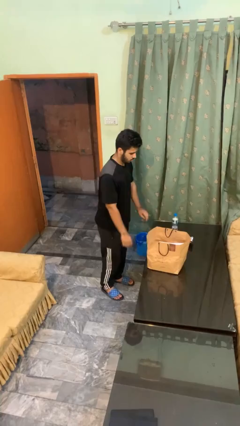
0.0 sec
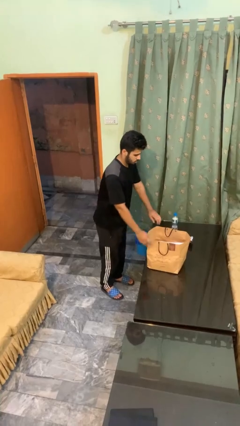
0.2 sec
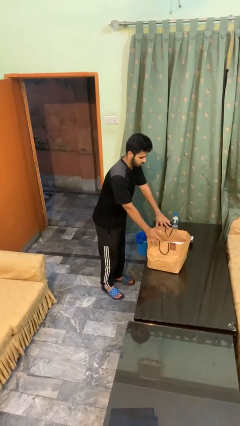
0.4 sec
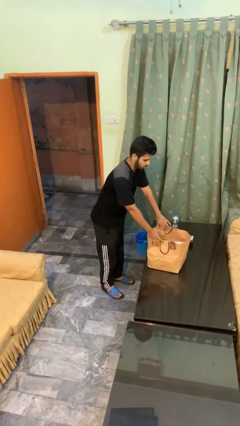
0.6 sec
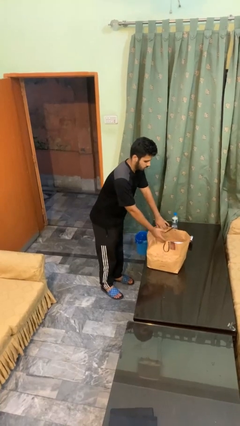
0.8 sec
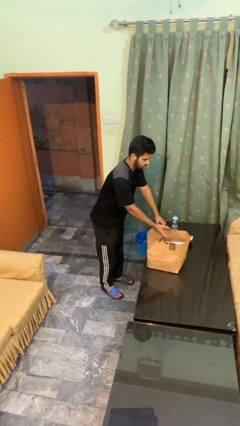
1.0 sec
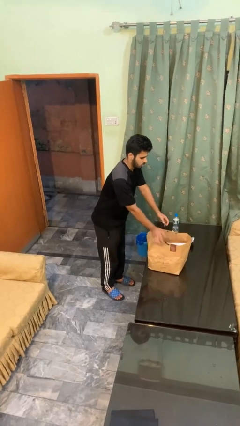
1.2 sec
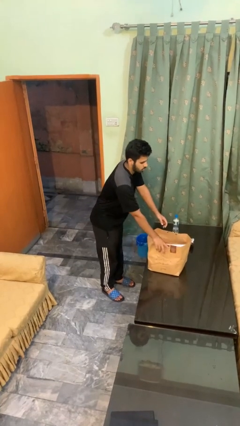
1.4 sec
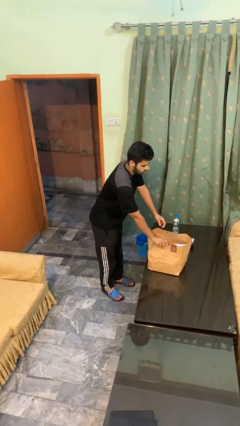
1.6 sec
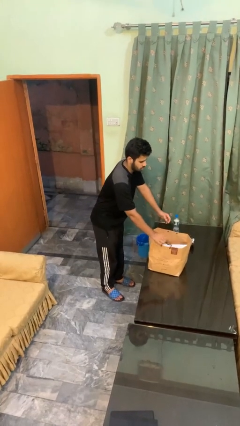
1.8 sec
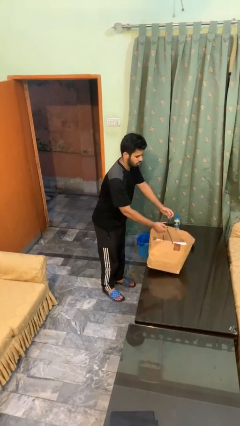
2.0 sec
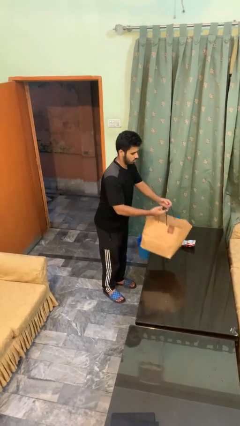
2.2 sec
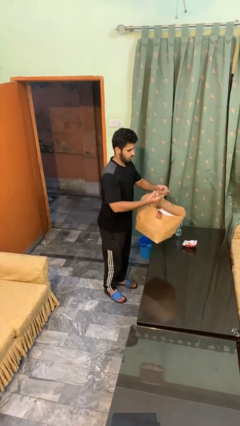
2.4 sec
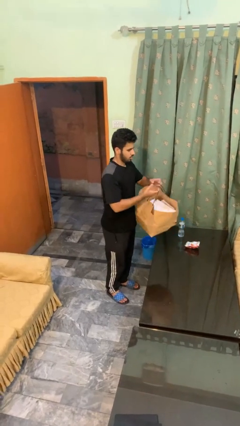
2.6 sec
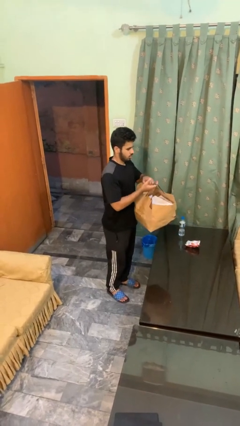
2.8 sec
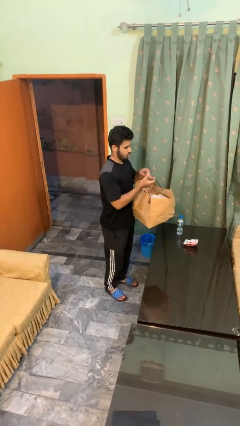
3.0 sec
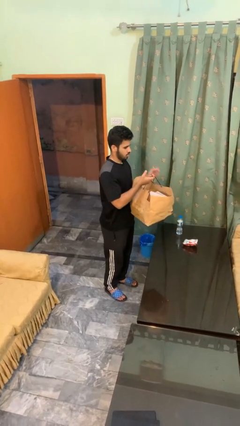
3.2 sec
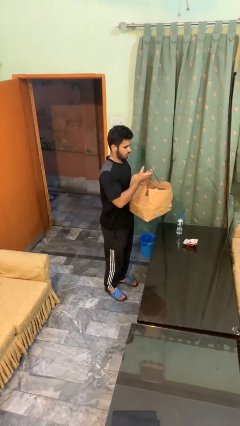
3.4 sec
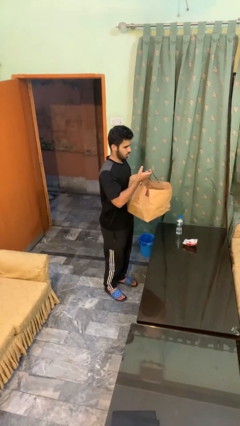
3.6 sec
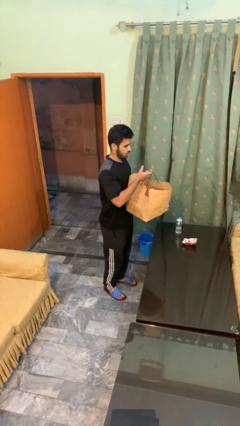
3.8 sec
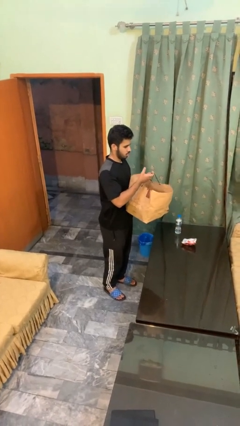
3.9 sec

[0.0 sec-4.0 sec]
person picks up object from countertop

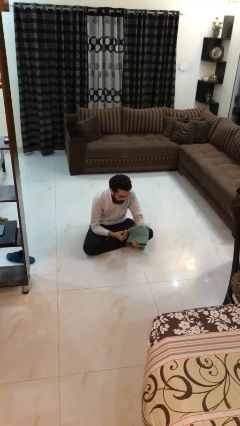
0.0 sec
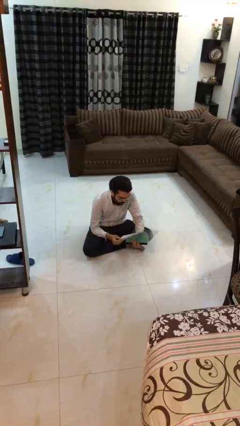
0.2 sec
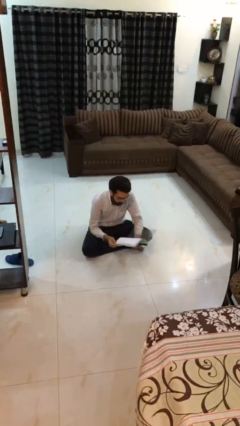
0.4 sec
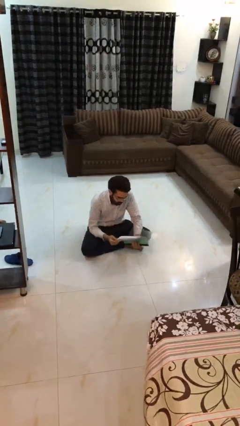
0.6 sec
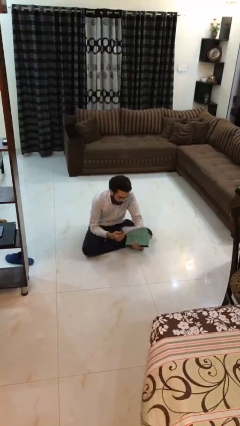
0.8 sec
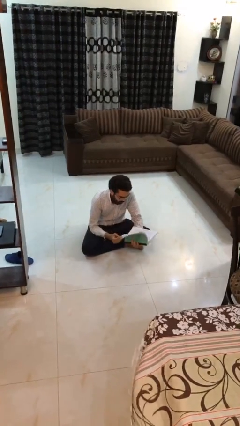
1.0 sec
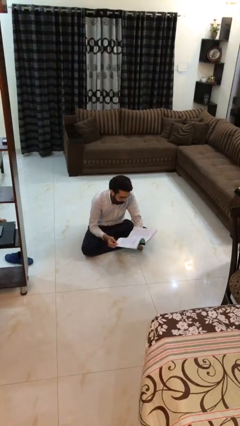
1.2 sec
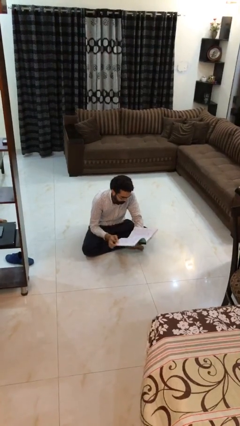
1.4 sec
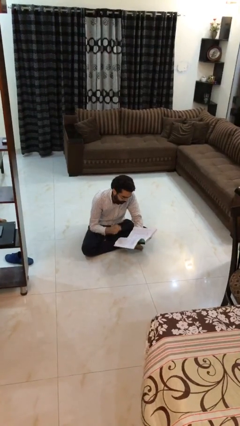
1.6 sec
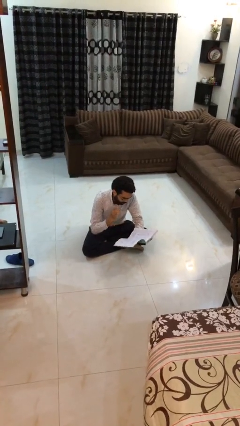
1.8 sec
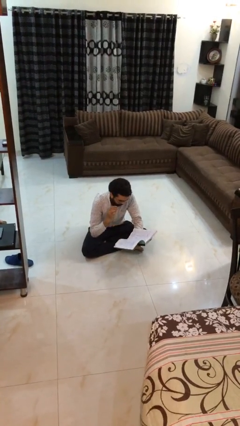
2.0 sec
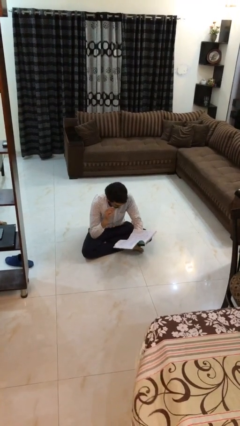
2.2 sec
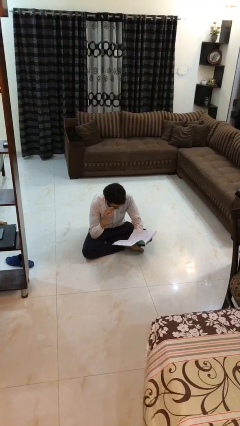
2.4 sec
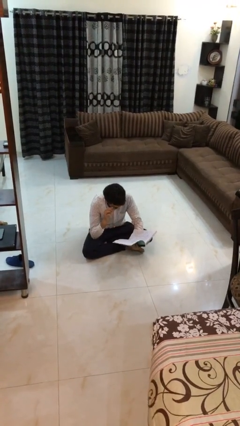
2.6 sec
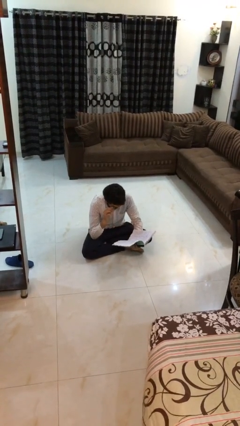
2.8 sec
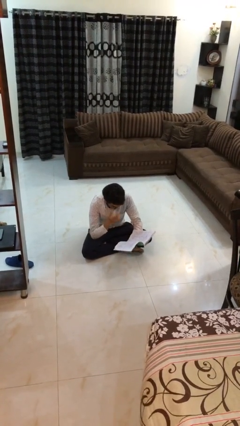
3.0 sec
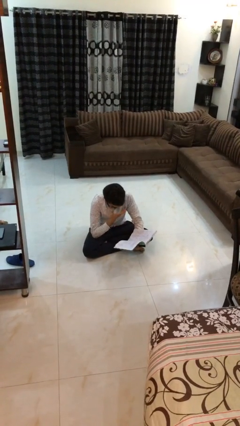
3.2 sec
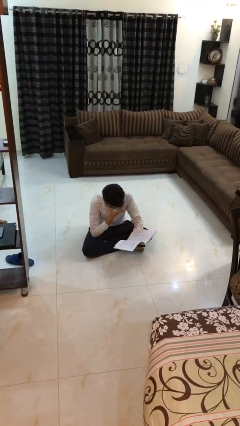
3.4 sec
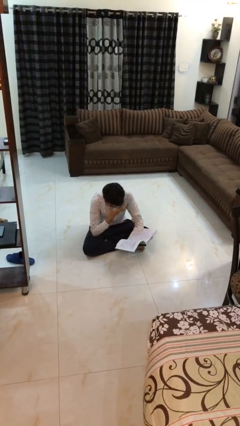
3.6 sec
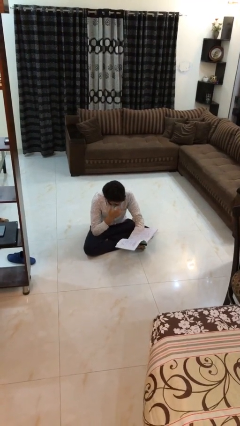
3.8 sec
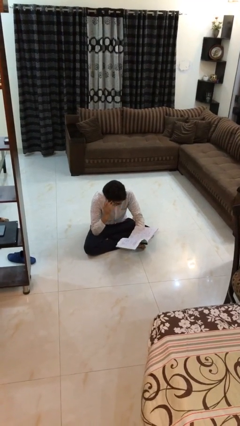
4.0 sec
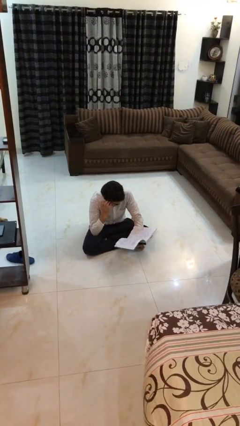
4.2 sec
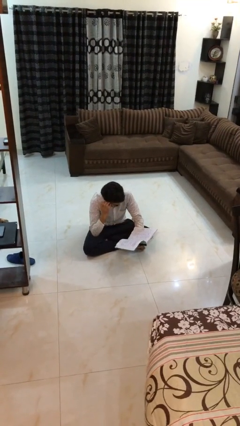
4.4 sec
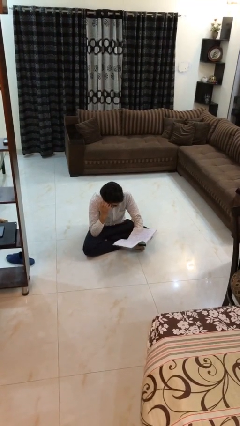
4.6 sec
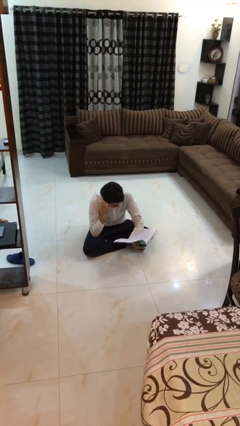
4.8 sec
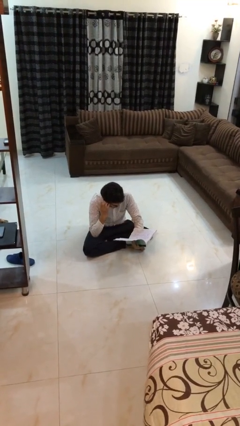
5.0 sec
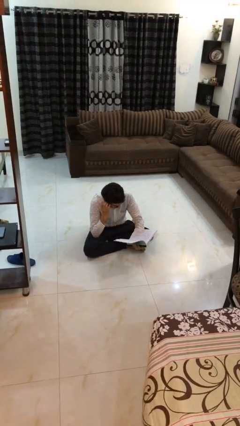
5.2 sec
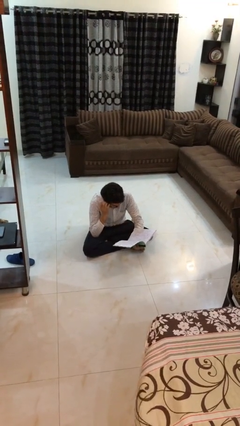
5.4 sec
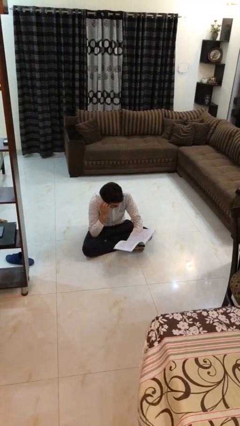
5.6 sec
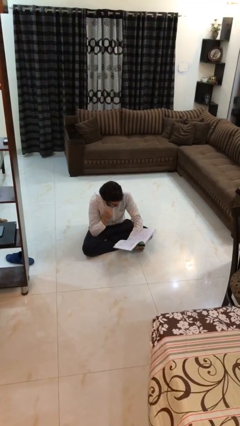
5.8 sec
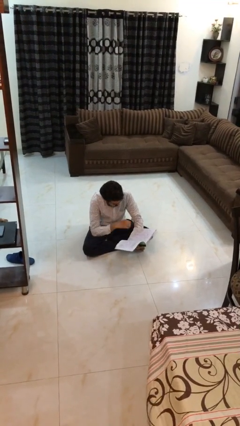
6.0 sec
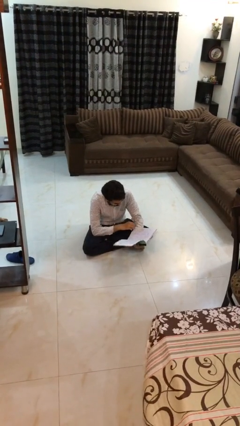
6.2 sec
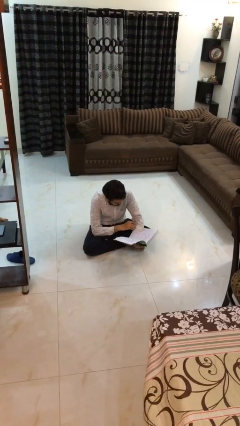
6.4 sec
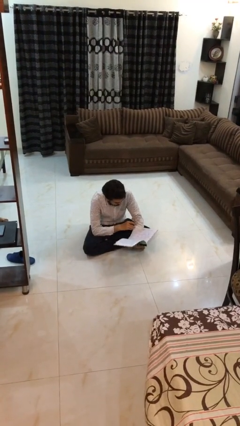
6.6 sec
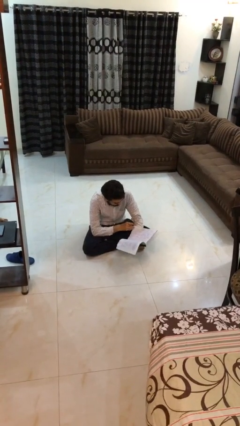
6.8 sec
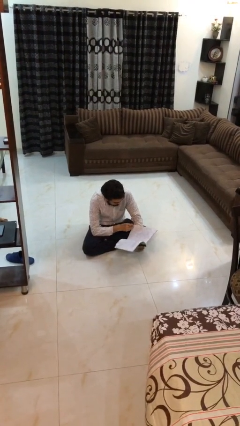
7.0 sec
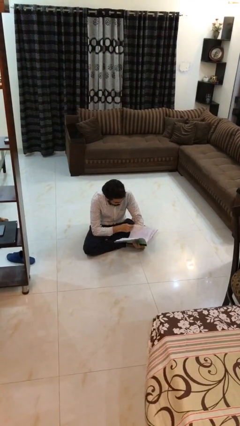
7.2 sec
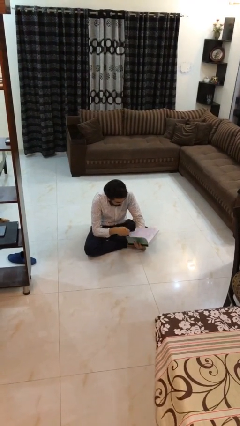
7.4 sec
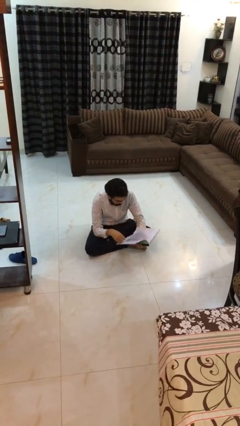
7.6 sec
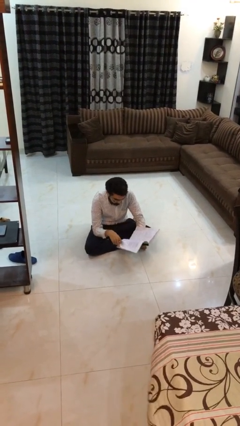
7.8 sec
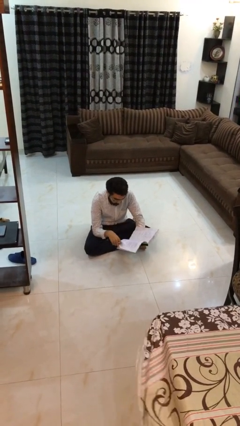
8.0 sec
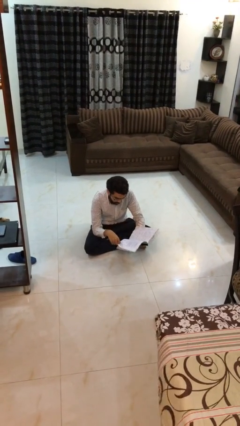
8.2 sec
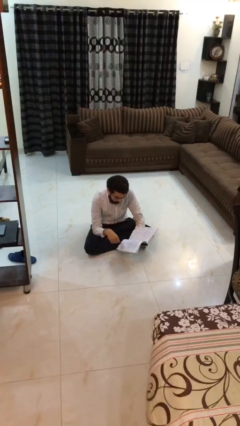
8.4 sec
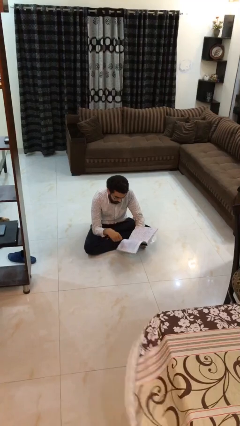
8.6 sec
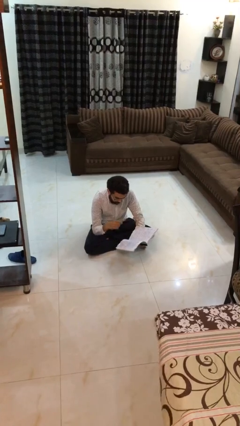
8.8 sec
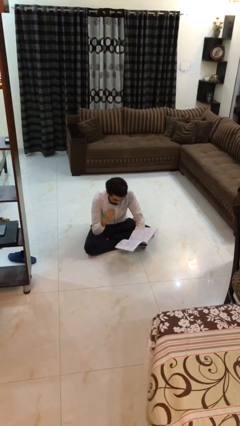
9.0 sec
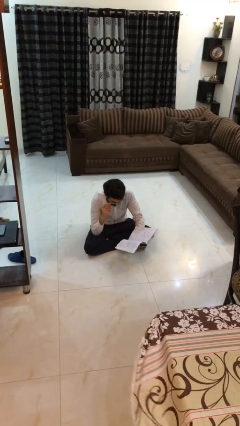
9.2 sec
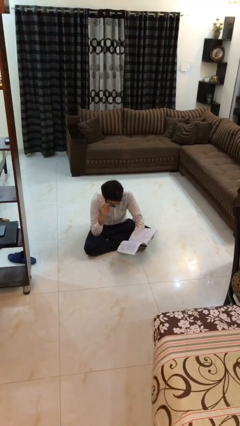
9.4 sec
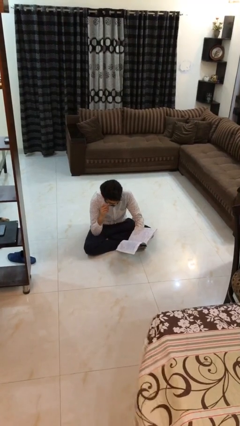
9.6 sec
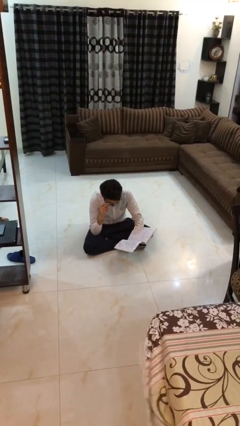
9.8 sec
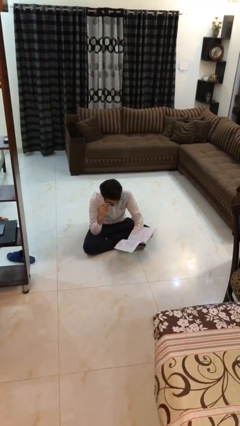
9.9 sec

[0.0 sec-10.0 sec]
person reads document

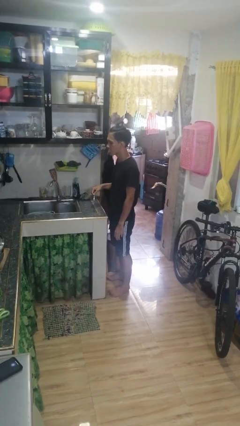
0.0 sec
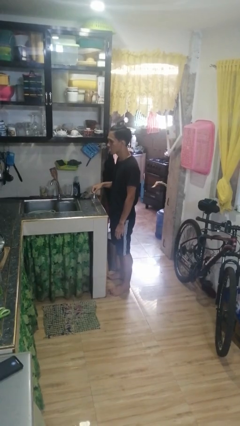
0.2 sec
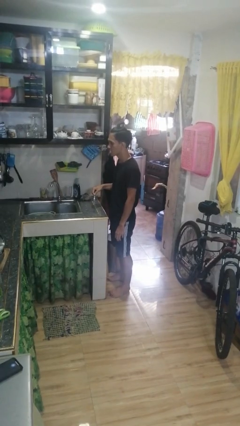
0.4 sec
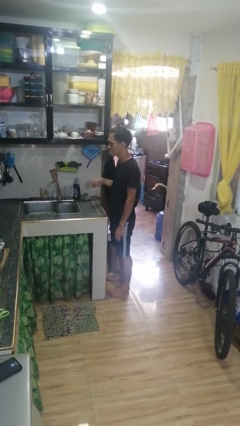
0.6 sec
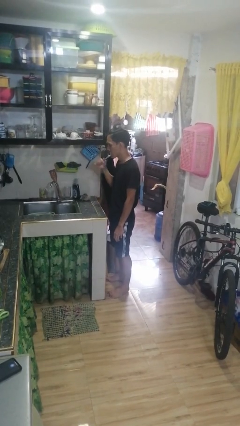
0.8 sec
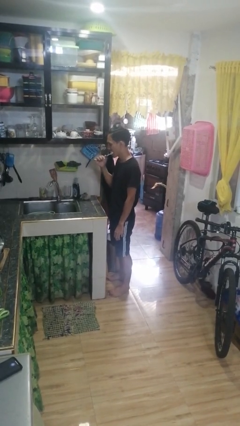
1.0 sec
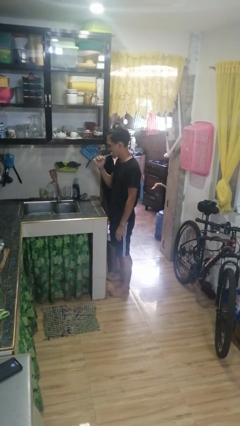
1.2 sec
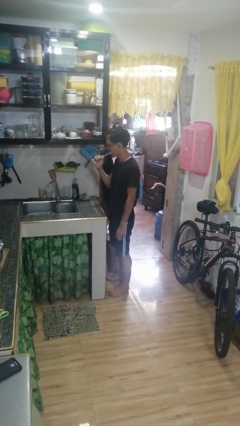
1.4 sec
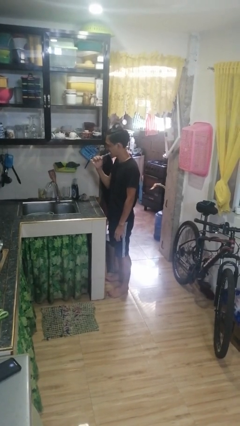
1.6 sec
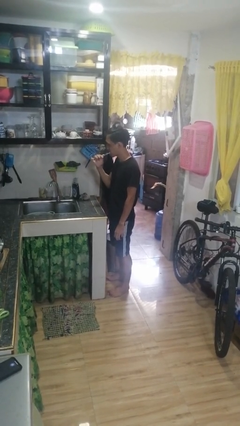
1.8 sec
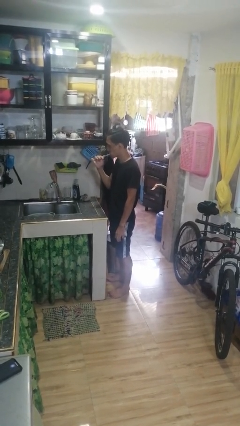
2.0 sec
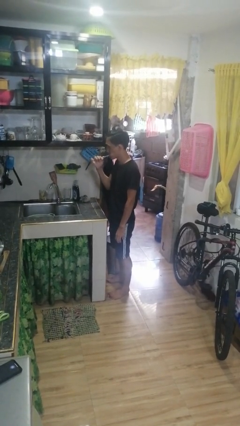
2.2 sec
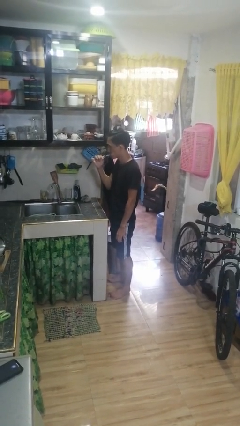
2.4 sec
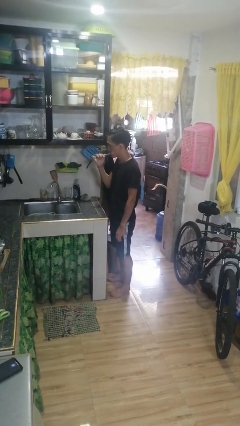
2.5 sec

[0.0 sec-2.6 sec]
person brushes teeth

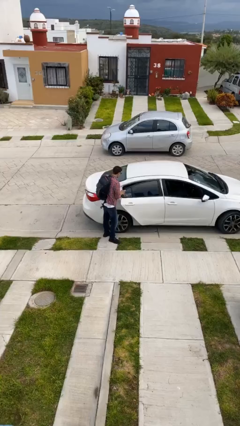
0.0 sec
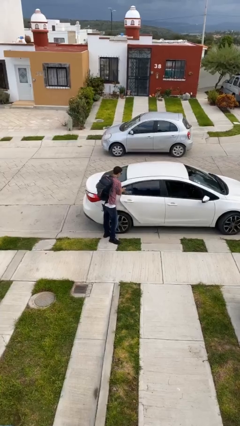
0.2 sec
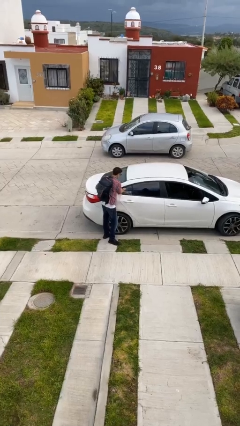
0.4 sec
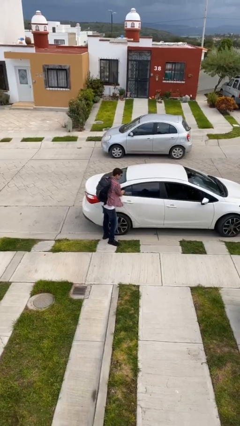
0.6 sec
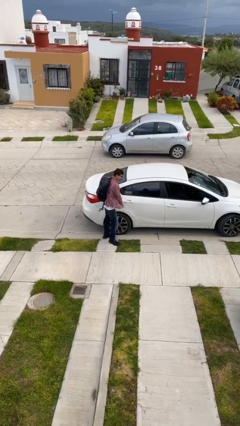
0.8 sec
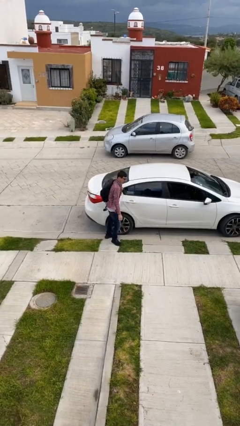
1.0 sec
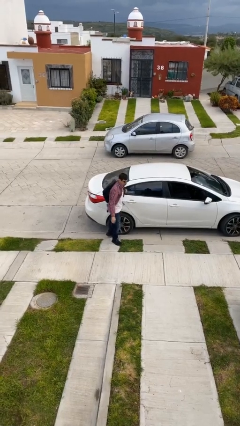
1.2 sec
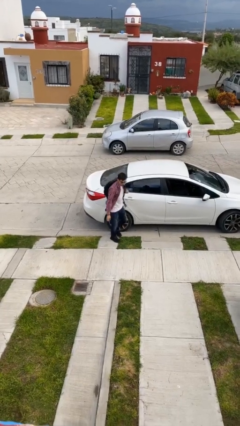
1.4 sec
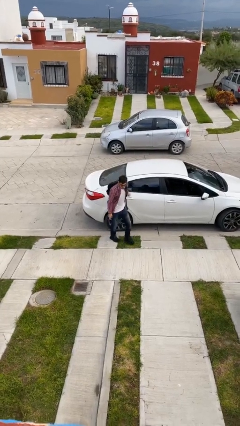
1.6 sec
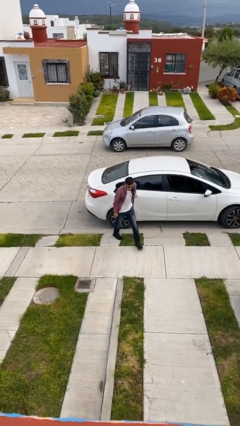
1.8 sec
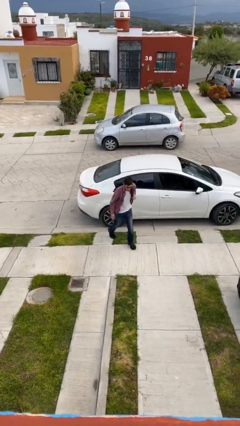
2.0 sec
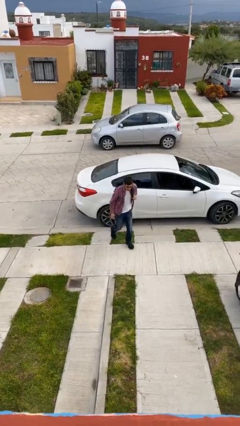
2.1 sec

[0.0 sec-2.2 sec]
person closes car door
